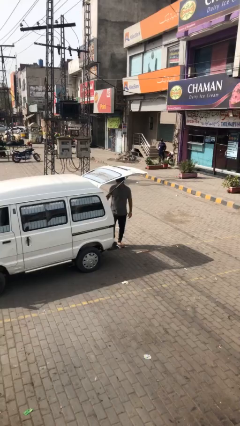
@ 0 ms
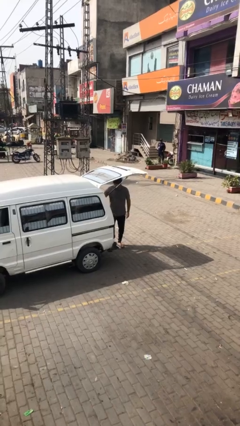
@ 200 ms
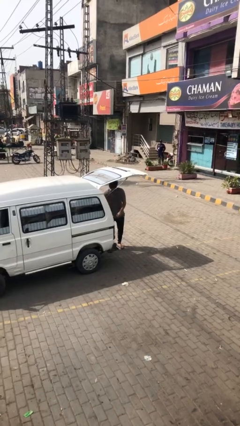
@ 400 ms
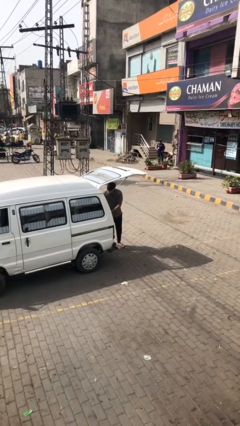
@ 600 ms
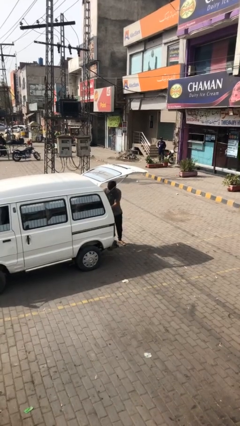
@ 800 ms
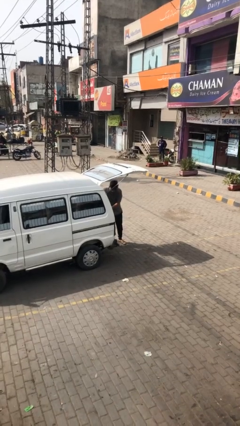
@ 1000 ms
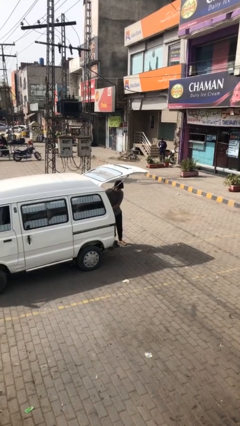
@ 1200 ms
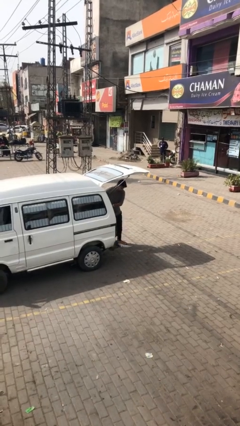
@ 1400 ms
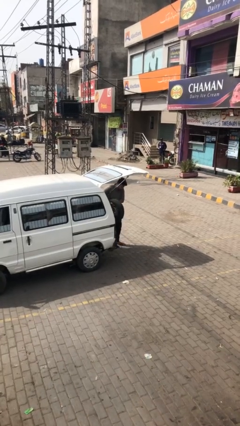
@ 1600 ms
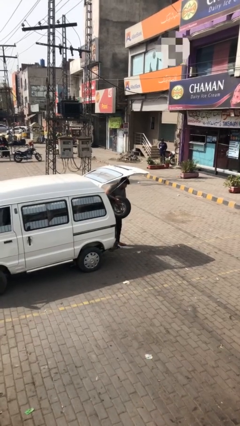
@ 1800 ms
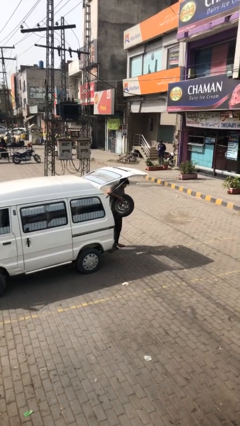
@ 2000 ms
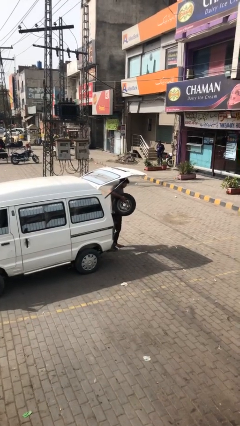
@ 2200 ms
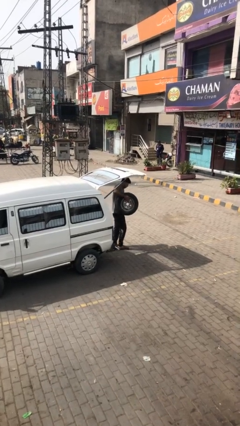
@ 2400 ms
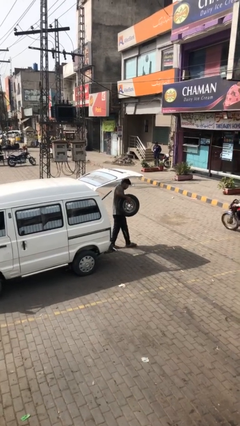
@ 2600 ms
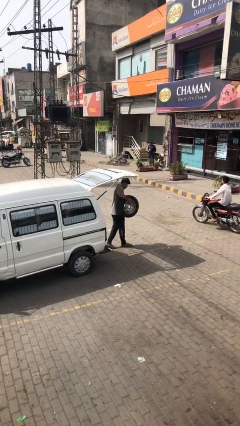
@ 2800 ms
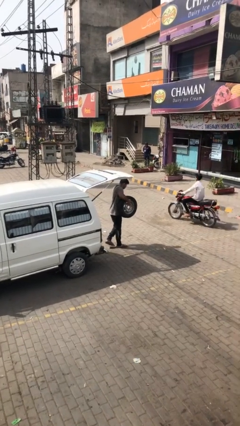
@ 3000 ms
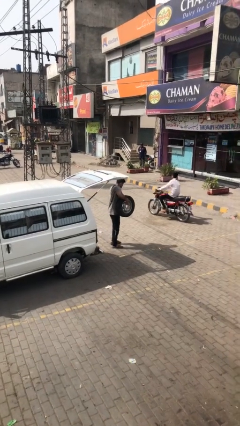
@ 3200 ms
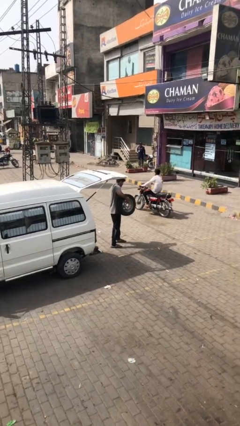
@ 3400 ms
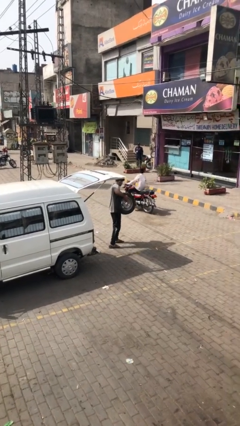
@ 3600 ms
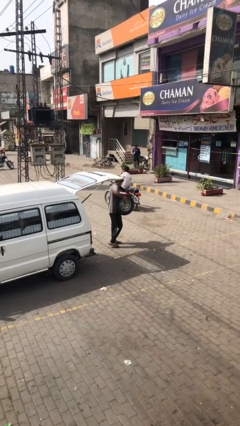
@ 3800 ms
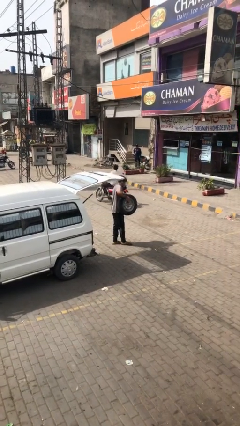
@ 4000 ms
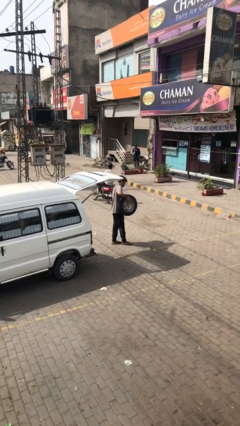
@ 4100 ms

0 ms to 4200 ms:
person unloads car

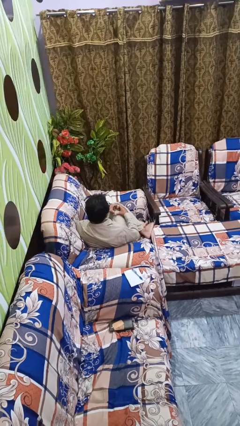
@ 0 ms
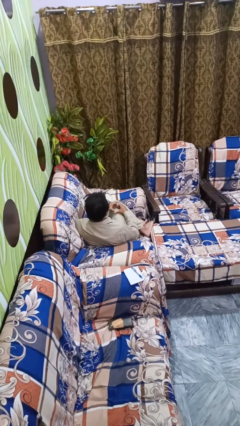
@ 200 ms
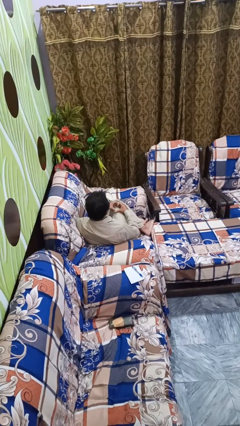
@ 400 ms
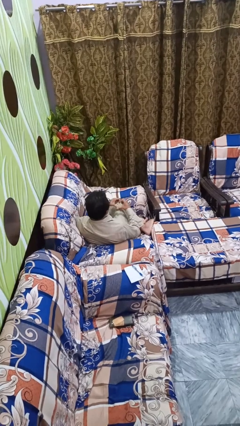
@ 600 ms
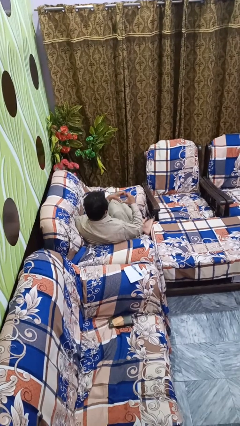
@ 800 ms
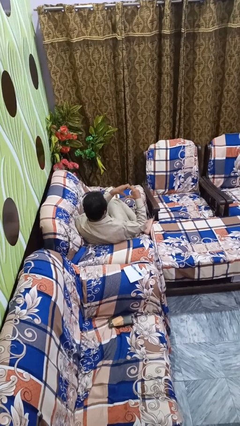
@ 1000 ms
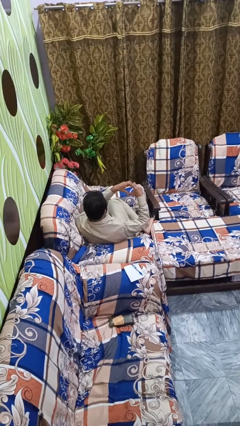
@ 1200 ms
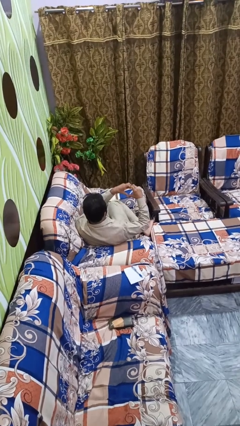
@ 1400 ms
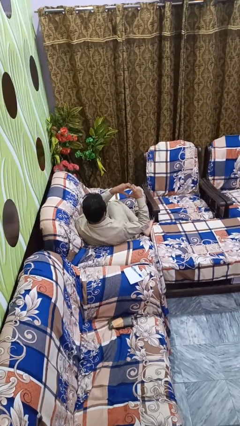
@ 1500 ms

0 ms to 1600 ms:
person gestures heart

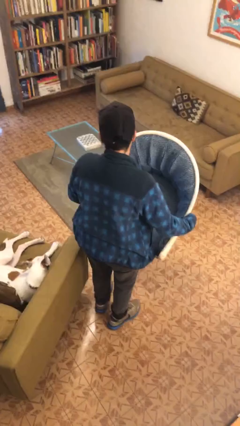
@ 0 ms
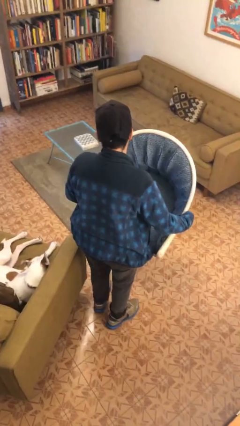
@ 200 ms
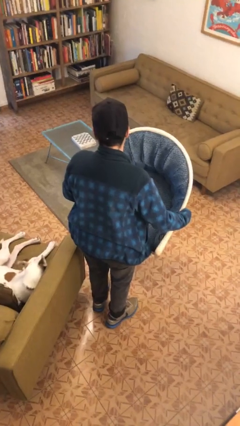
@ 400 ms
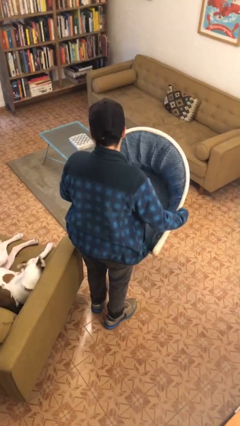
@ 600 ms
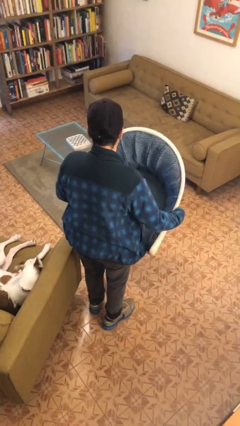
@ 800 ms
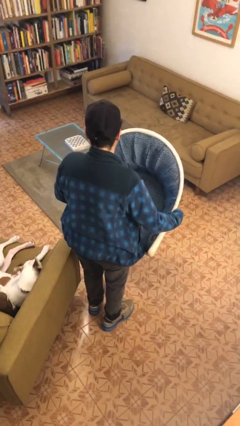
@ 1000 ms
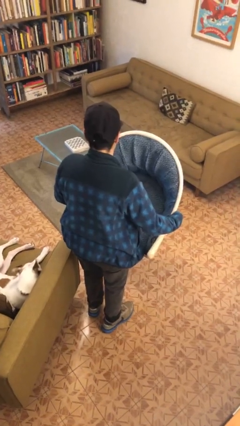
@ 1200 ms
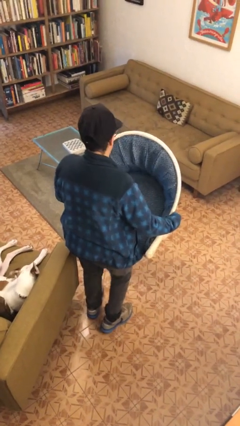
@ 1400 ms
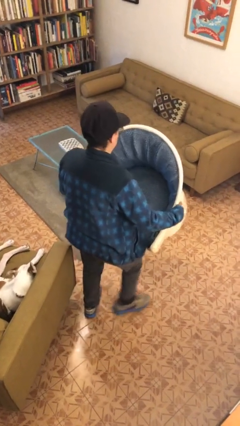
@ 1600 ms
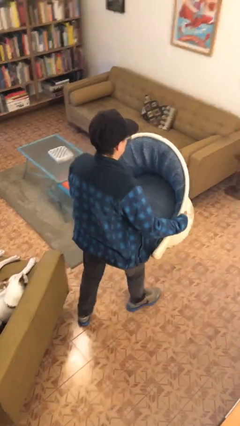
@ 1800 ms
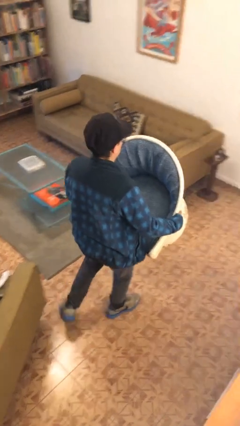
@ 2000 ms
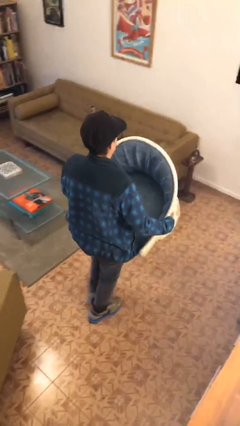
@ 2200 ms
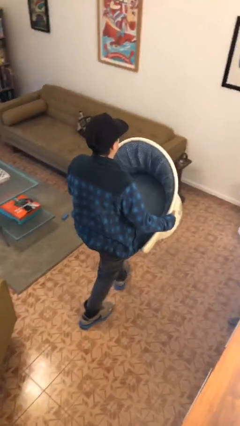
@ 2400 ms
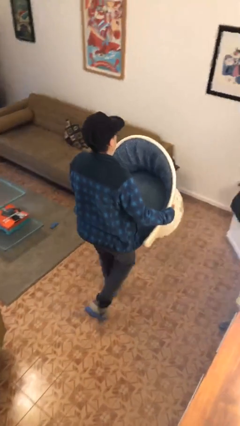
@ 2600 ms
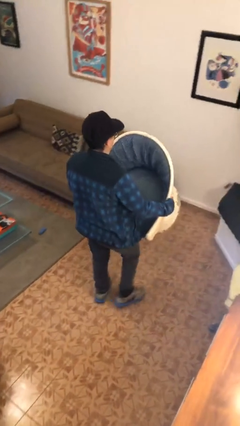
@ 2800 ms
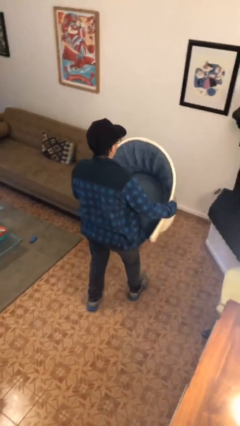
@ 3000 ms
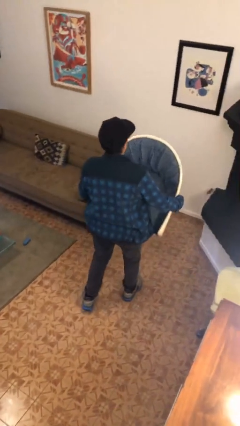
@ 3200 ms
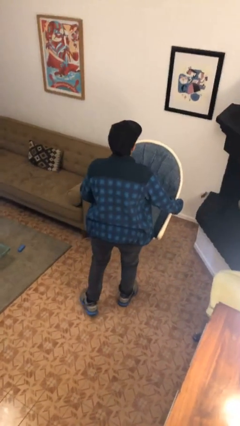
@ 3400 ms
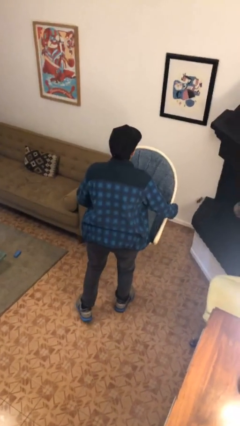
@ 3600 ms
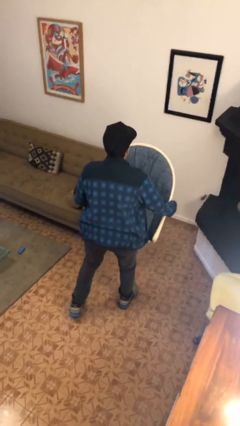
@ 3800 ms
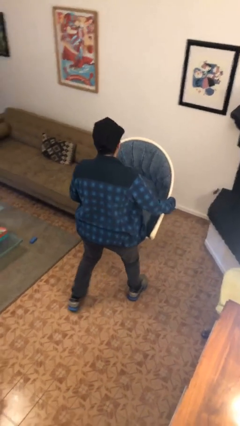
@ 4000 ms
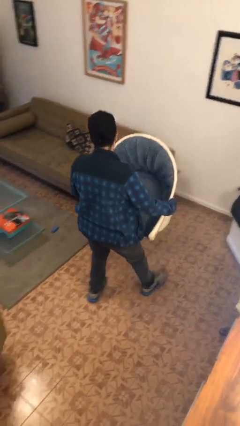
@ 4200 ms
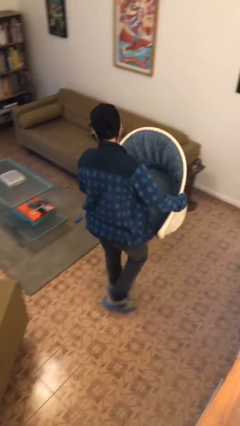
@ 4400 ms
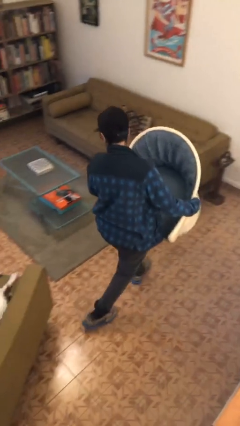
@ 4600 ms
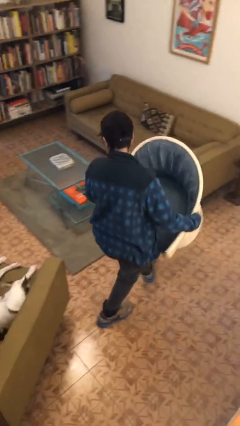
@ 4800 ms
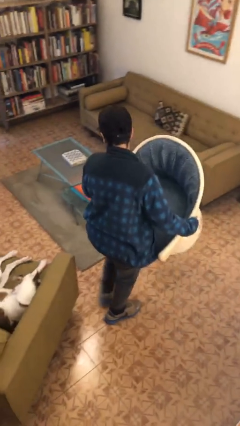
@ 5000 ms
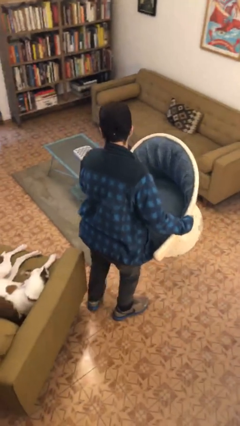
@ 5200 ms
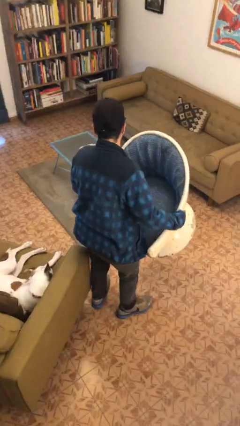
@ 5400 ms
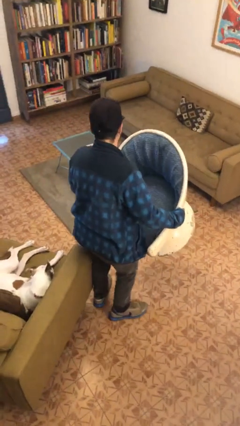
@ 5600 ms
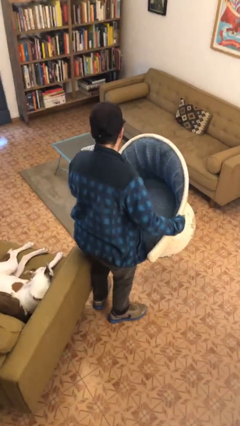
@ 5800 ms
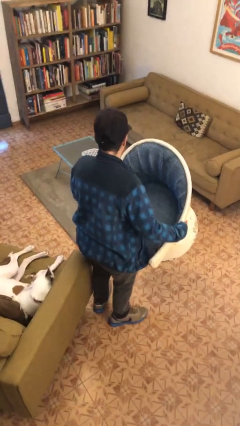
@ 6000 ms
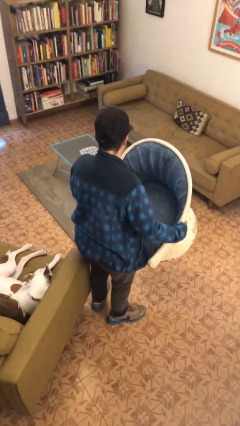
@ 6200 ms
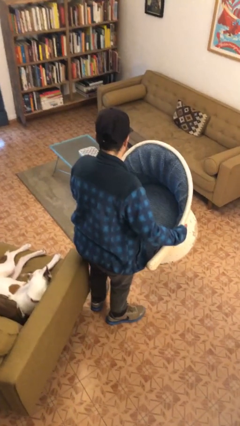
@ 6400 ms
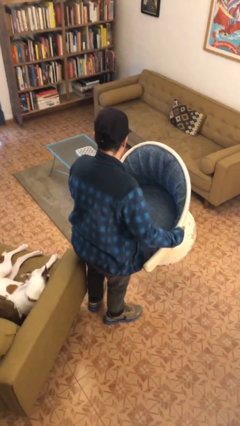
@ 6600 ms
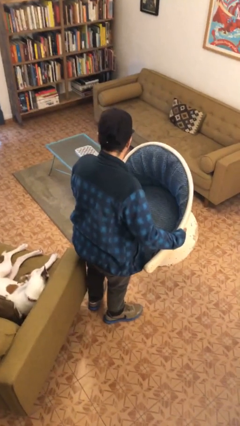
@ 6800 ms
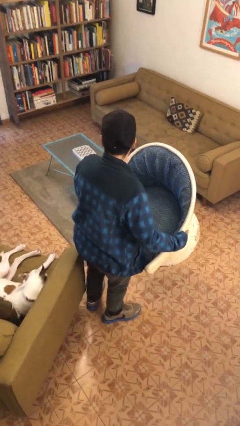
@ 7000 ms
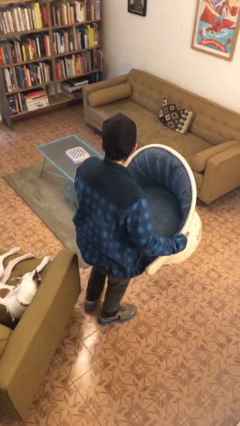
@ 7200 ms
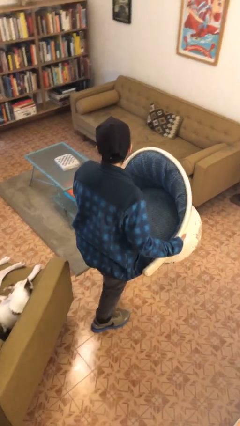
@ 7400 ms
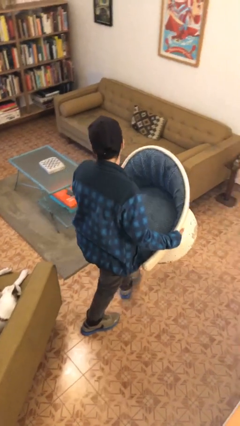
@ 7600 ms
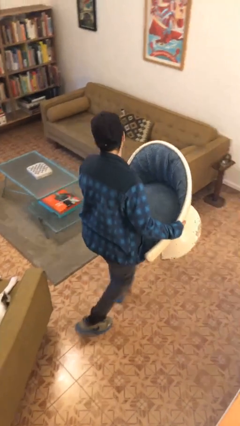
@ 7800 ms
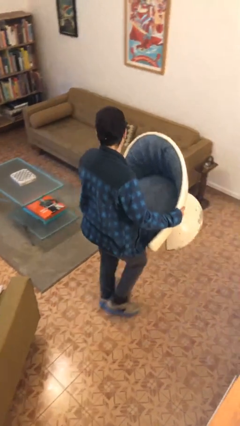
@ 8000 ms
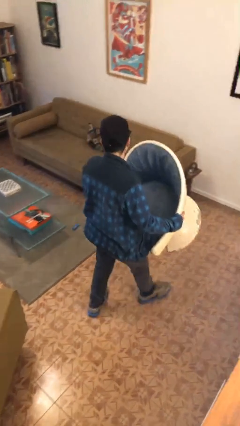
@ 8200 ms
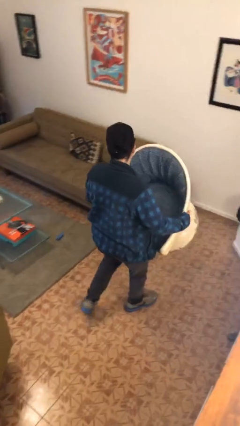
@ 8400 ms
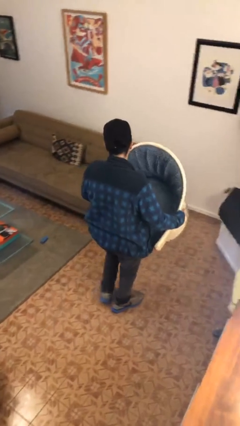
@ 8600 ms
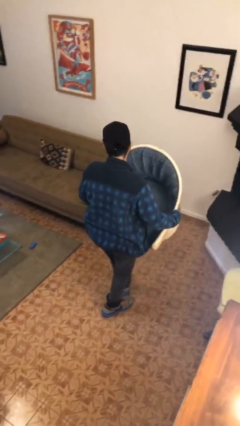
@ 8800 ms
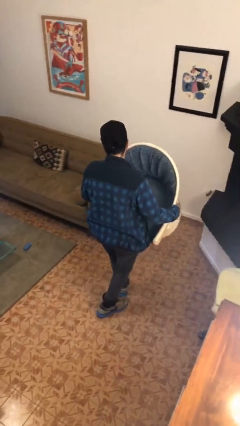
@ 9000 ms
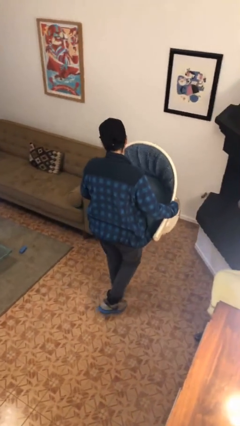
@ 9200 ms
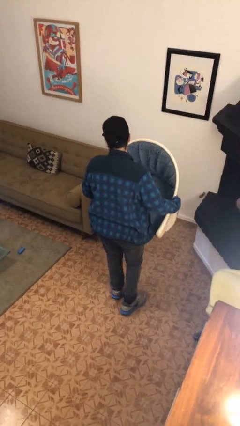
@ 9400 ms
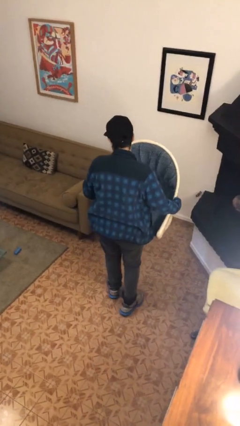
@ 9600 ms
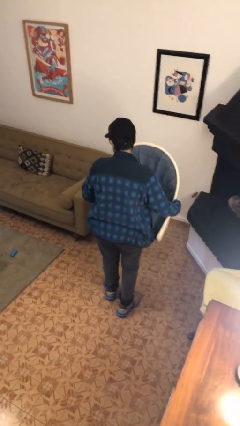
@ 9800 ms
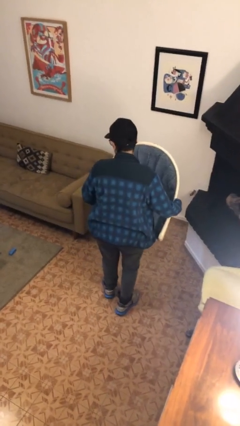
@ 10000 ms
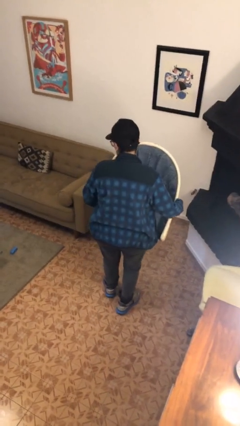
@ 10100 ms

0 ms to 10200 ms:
person carries furniture

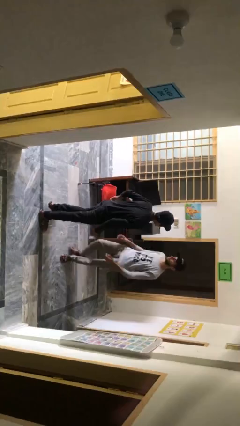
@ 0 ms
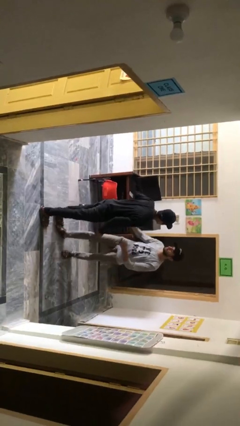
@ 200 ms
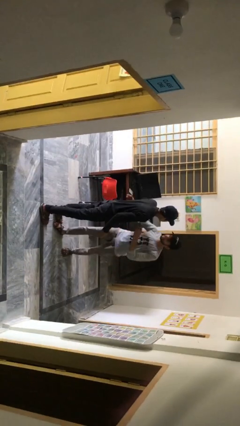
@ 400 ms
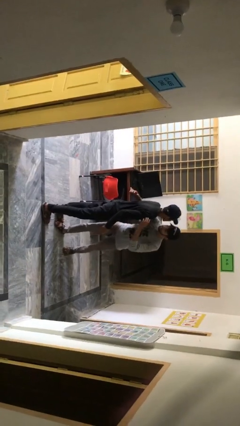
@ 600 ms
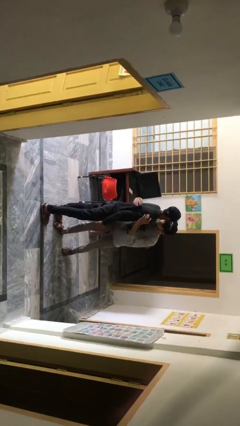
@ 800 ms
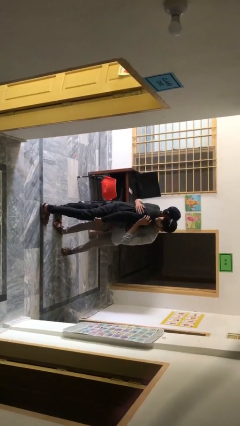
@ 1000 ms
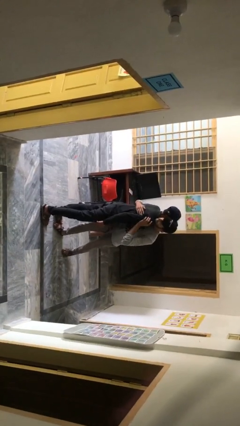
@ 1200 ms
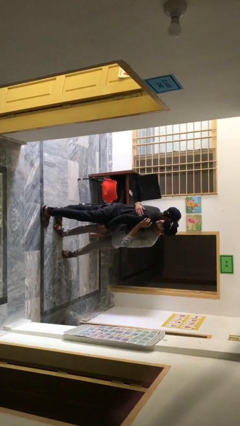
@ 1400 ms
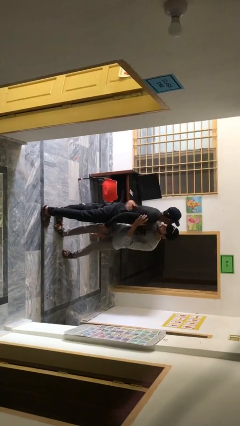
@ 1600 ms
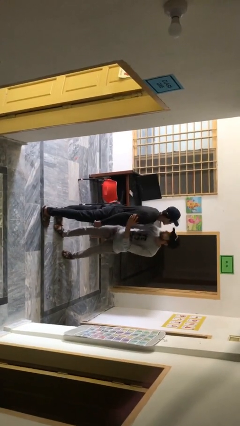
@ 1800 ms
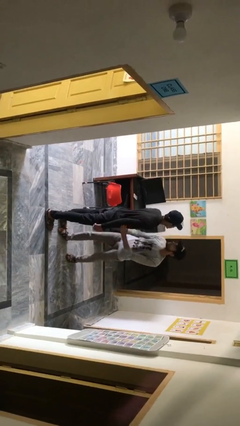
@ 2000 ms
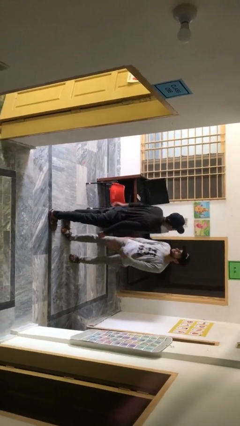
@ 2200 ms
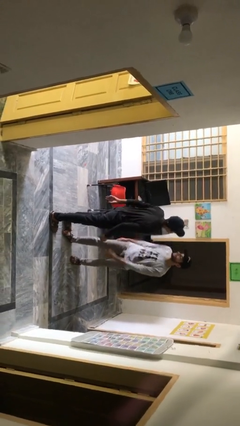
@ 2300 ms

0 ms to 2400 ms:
person embraces person
